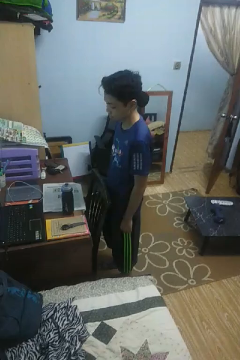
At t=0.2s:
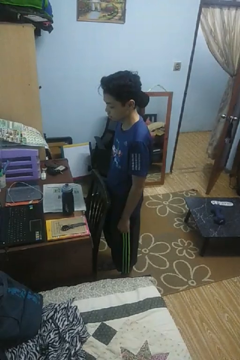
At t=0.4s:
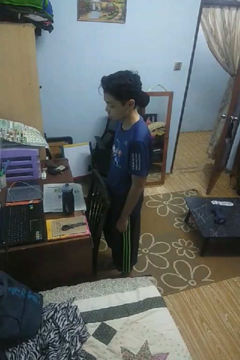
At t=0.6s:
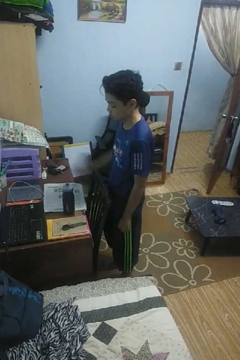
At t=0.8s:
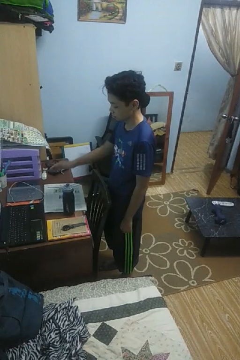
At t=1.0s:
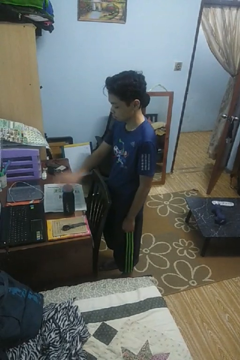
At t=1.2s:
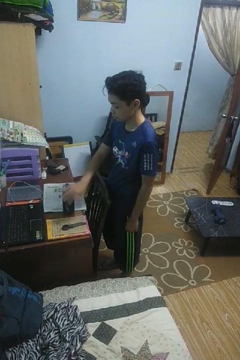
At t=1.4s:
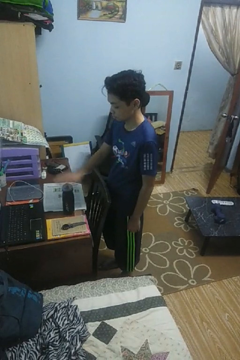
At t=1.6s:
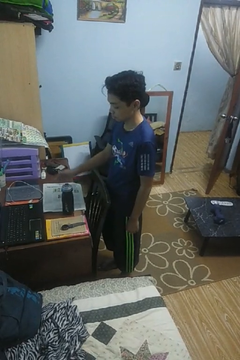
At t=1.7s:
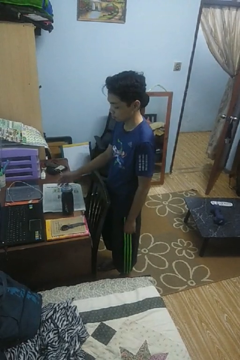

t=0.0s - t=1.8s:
person waves hand over object

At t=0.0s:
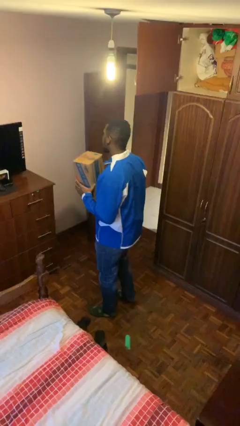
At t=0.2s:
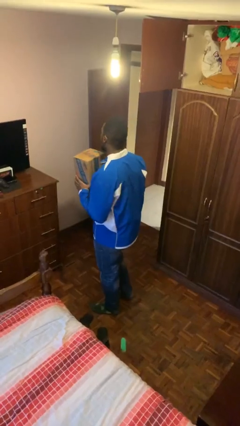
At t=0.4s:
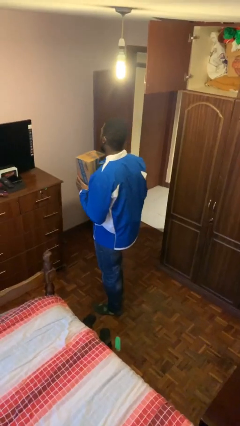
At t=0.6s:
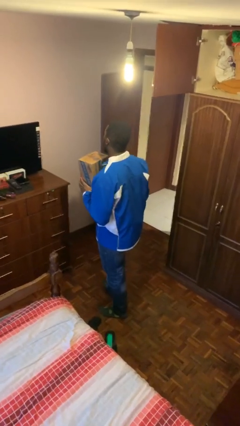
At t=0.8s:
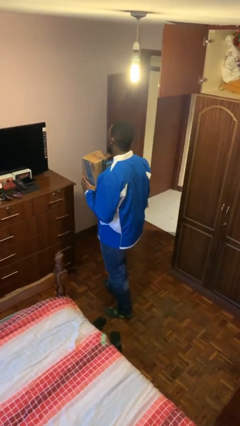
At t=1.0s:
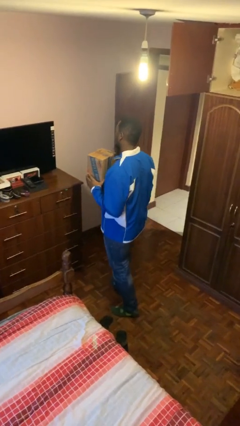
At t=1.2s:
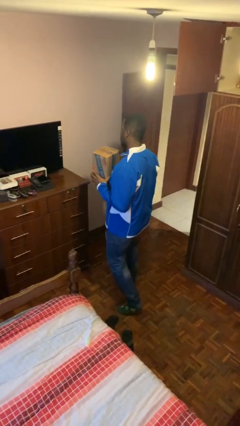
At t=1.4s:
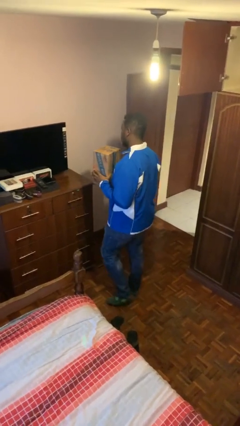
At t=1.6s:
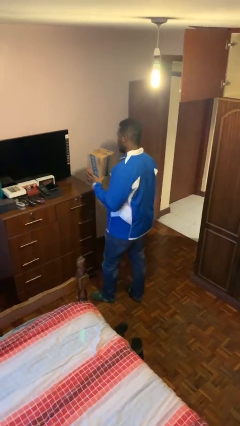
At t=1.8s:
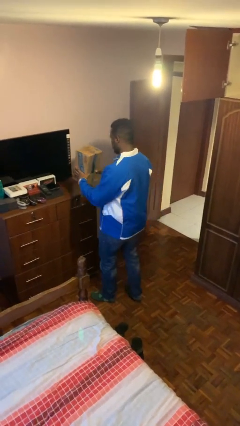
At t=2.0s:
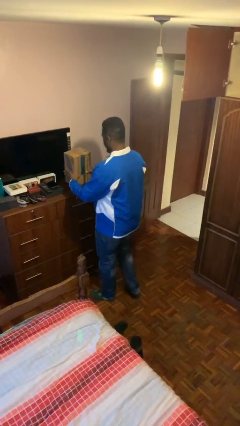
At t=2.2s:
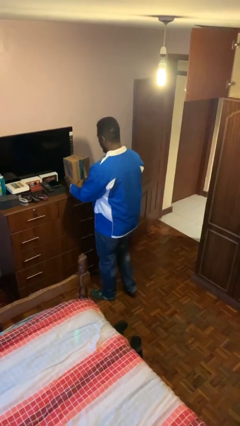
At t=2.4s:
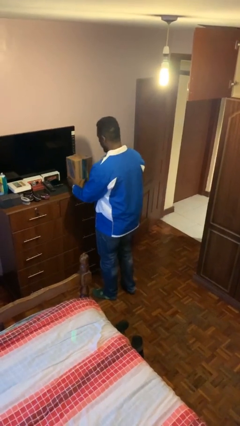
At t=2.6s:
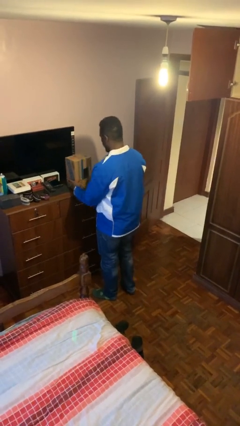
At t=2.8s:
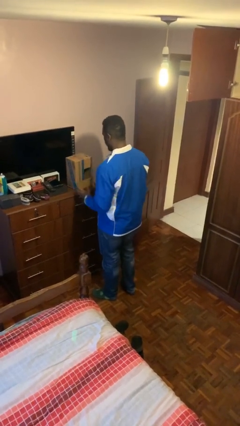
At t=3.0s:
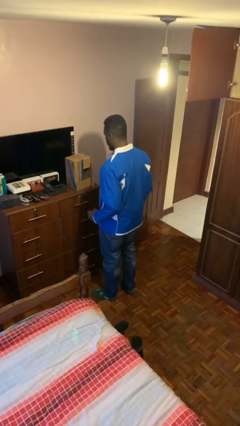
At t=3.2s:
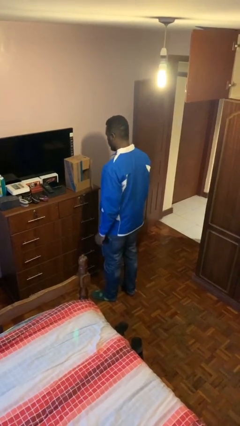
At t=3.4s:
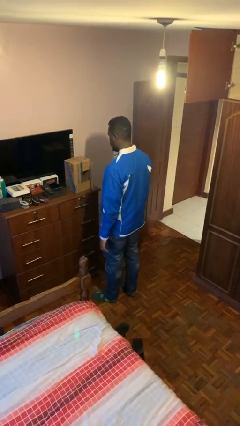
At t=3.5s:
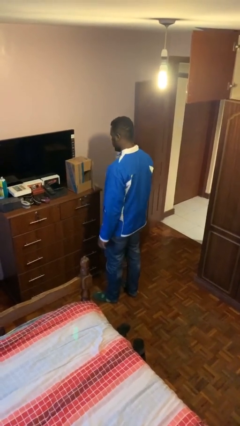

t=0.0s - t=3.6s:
person puts down object on table

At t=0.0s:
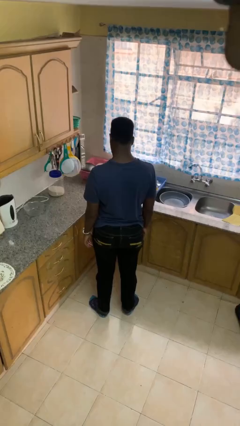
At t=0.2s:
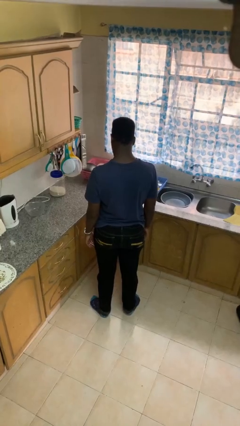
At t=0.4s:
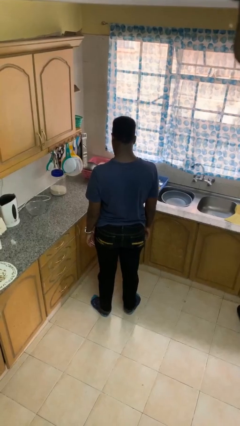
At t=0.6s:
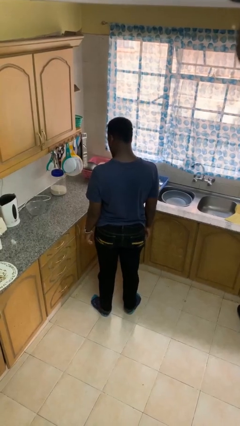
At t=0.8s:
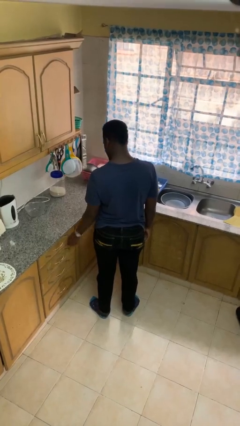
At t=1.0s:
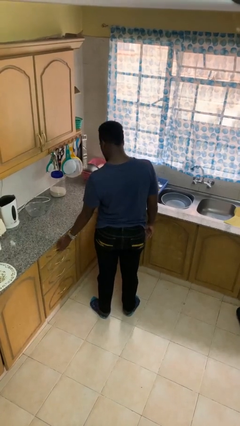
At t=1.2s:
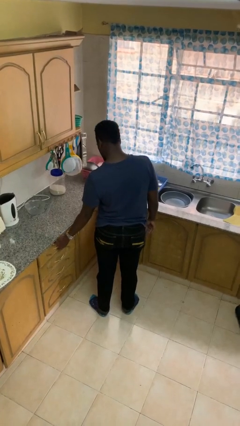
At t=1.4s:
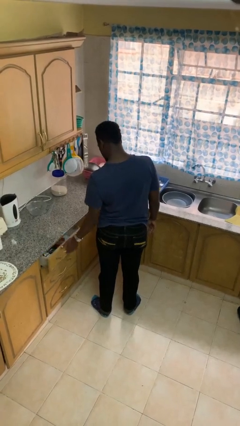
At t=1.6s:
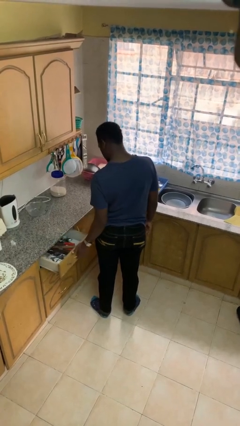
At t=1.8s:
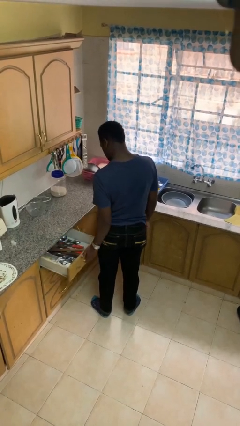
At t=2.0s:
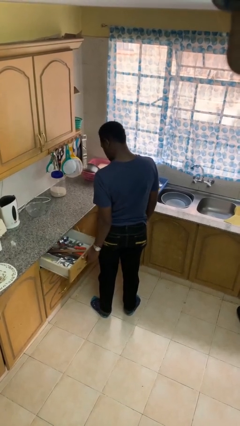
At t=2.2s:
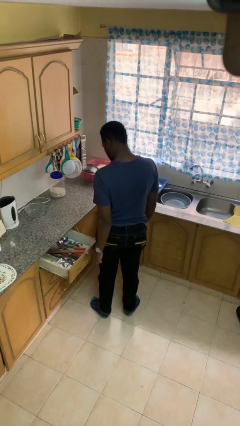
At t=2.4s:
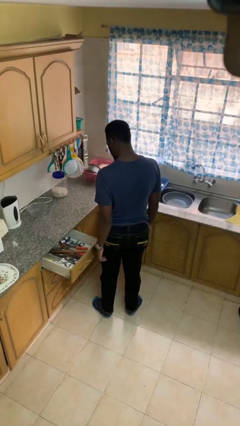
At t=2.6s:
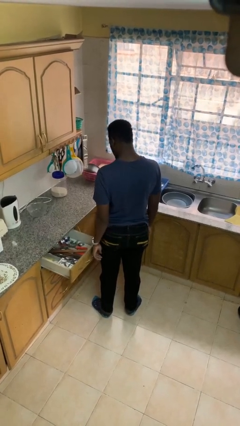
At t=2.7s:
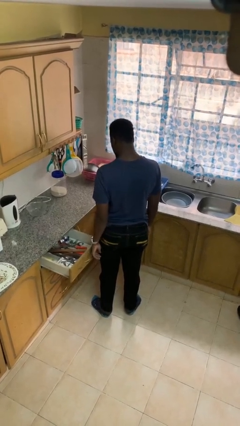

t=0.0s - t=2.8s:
person opens kitchen drawer

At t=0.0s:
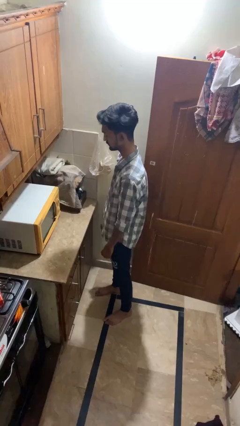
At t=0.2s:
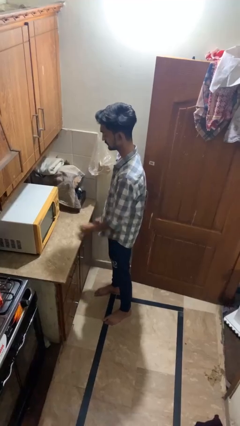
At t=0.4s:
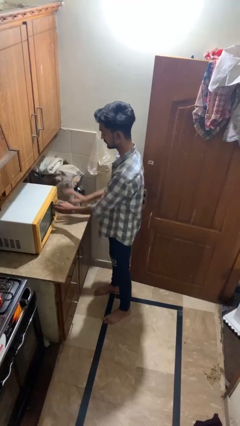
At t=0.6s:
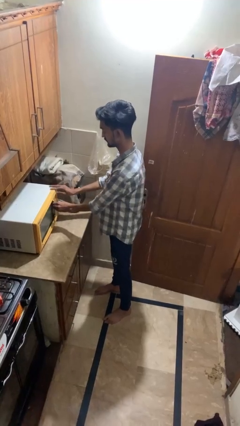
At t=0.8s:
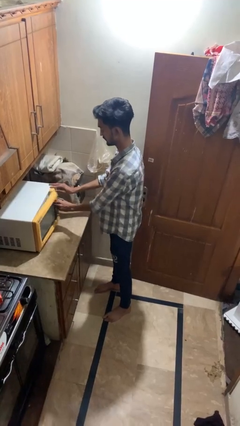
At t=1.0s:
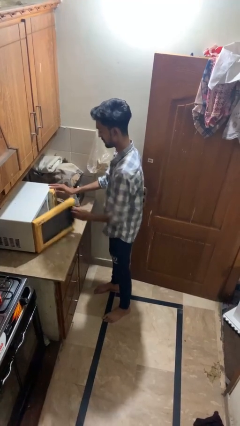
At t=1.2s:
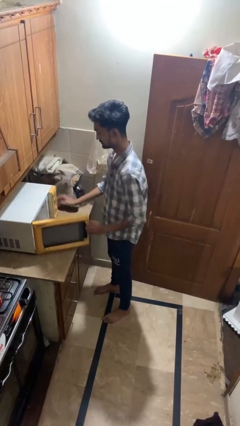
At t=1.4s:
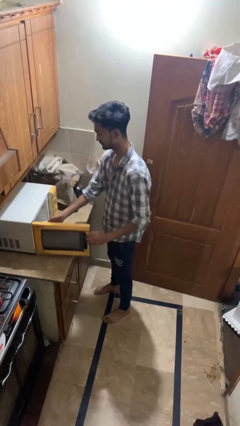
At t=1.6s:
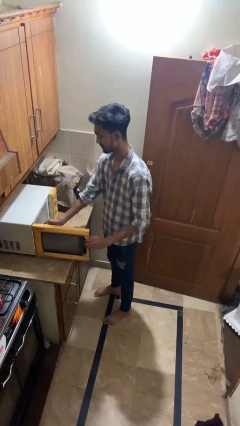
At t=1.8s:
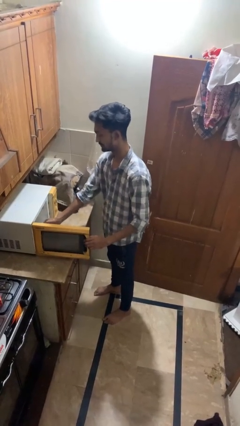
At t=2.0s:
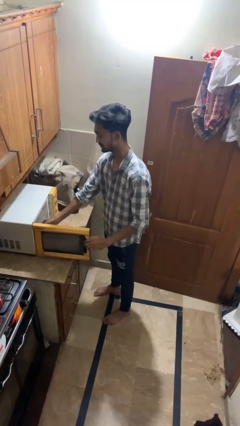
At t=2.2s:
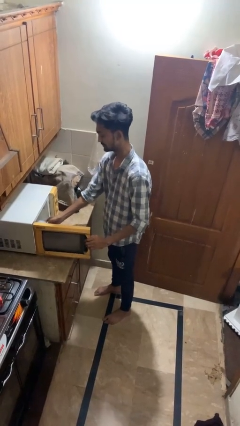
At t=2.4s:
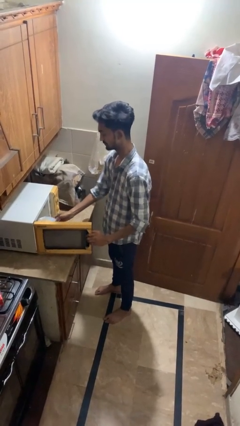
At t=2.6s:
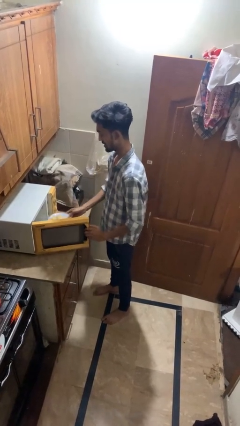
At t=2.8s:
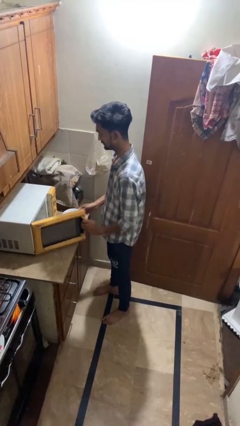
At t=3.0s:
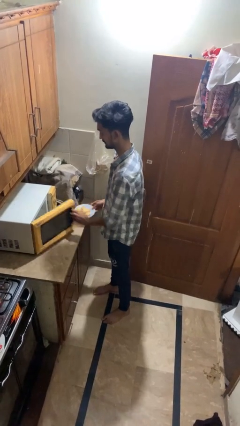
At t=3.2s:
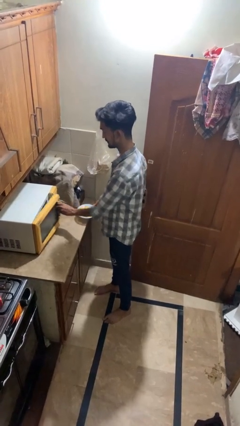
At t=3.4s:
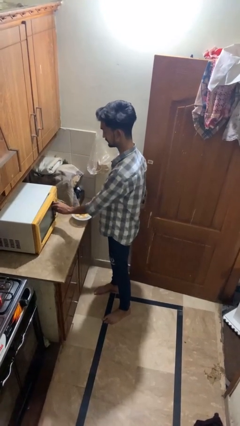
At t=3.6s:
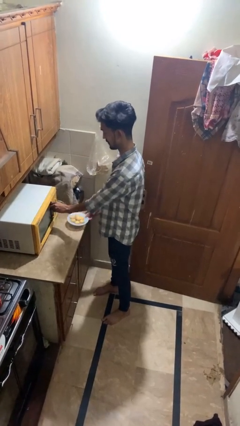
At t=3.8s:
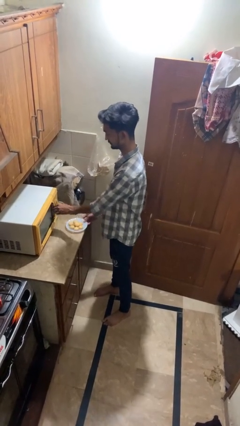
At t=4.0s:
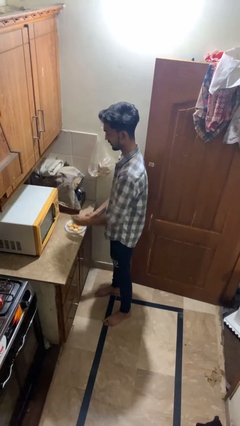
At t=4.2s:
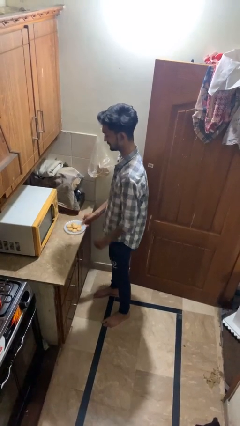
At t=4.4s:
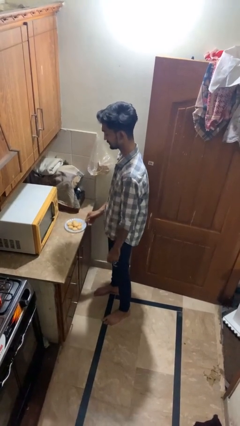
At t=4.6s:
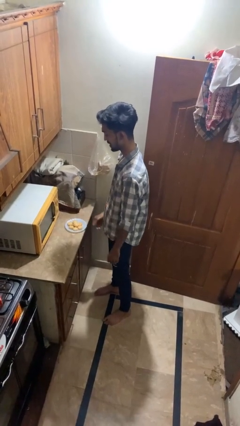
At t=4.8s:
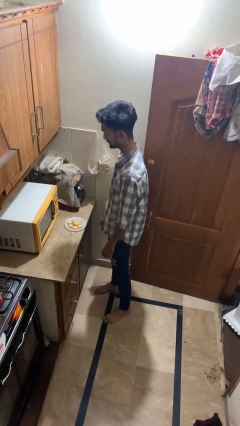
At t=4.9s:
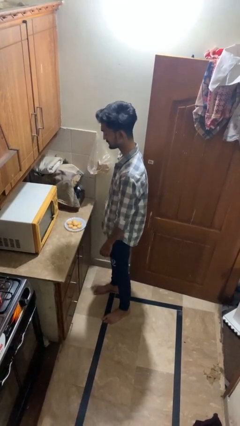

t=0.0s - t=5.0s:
person takes object from microwave

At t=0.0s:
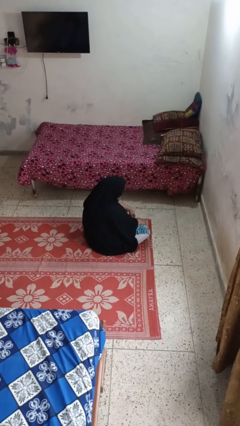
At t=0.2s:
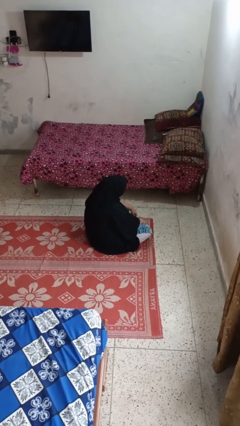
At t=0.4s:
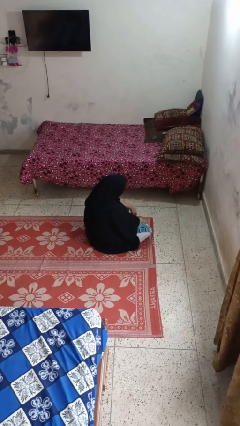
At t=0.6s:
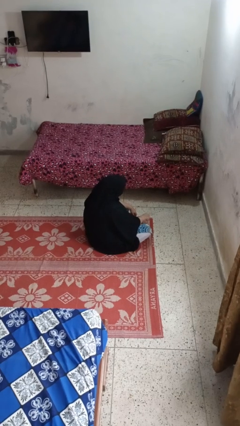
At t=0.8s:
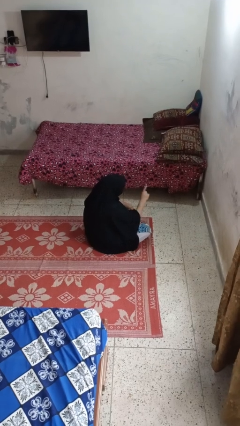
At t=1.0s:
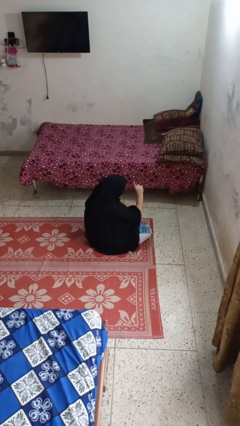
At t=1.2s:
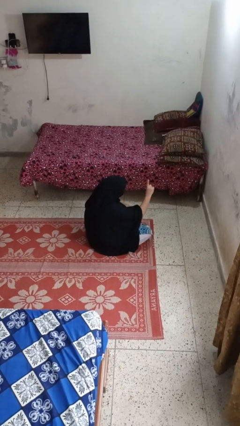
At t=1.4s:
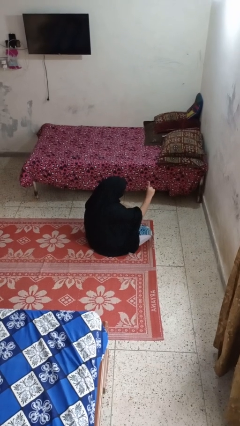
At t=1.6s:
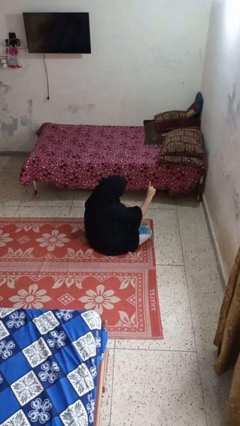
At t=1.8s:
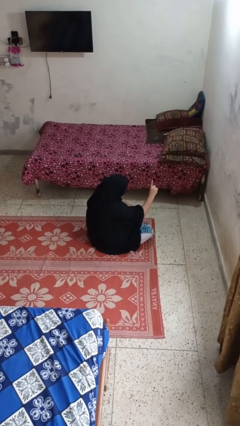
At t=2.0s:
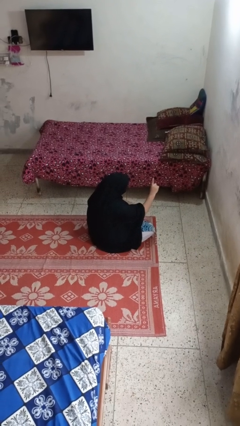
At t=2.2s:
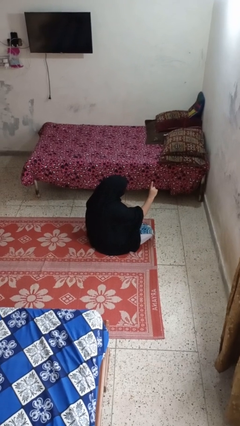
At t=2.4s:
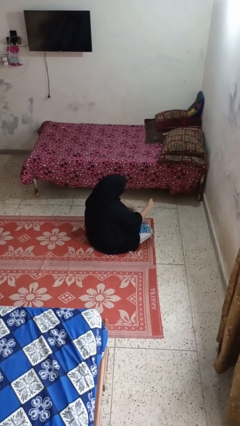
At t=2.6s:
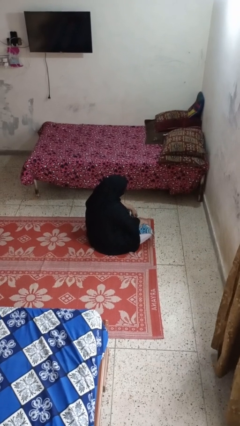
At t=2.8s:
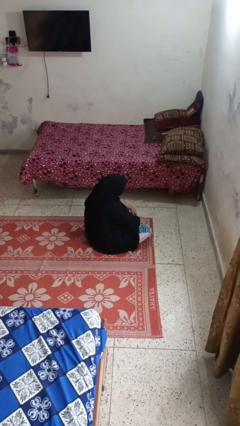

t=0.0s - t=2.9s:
person gestures number one

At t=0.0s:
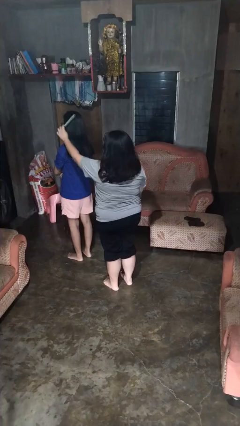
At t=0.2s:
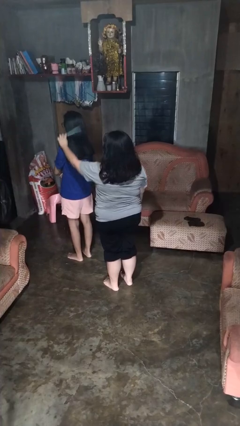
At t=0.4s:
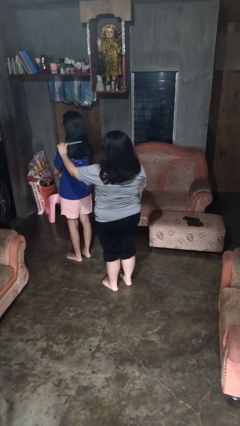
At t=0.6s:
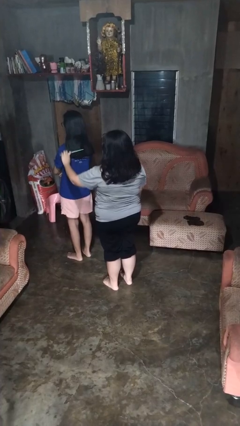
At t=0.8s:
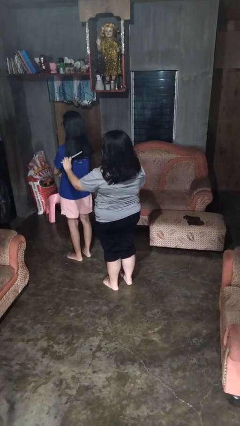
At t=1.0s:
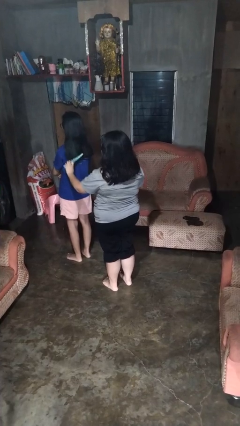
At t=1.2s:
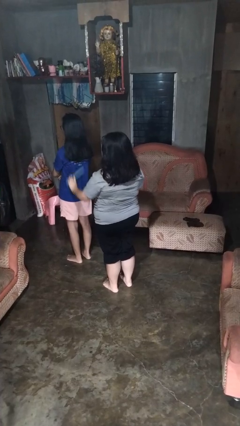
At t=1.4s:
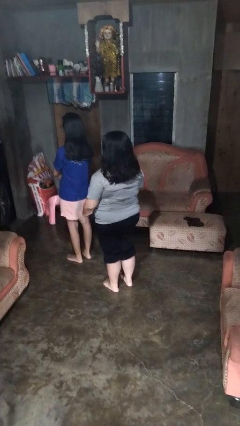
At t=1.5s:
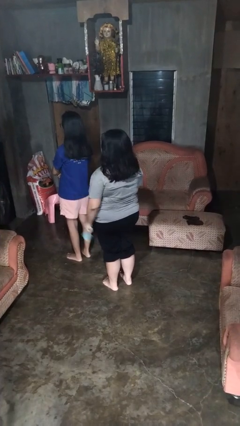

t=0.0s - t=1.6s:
person brushes hair of person

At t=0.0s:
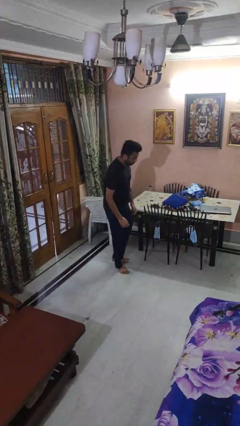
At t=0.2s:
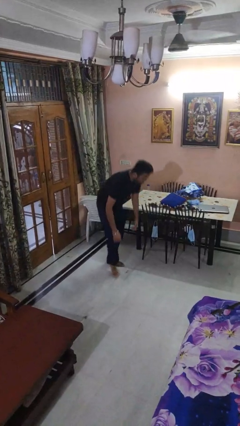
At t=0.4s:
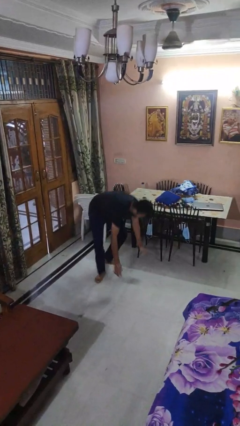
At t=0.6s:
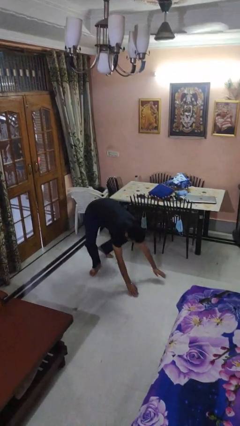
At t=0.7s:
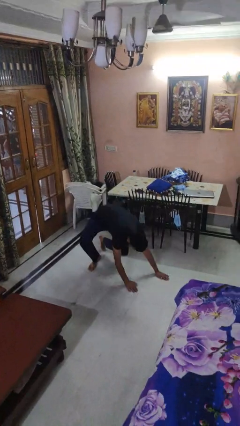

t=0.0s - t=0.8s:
person trips on object on floor
